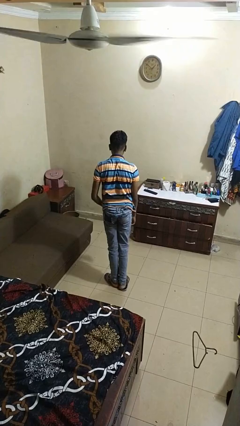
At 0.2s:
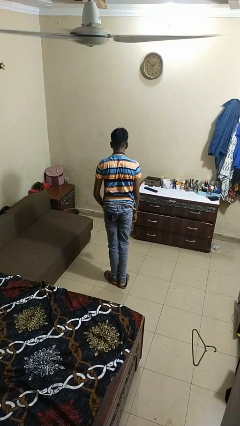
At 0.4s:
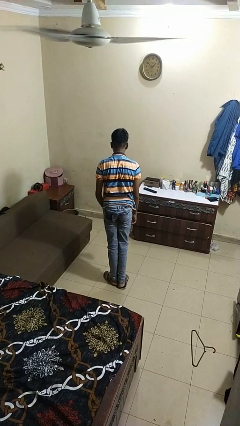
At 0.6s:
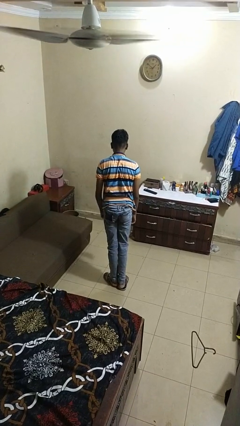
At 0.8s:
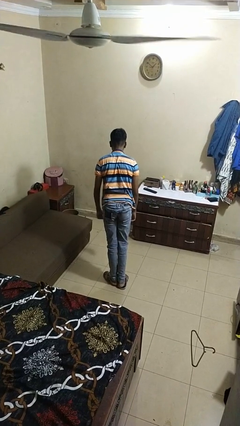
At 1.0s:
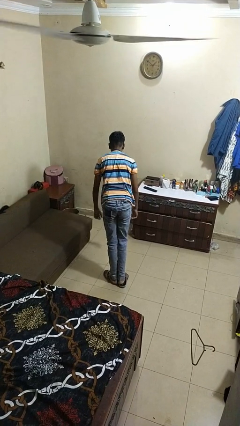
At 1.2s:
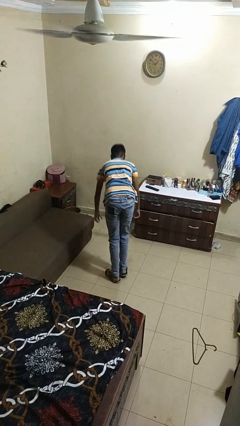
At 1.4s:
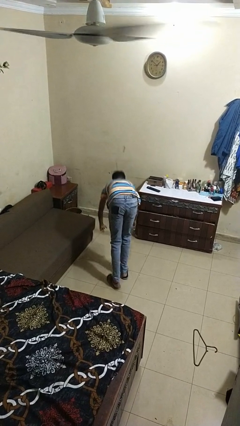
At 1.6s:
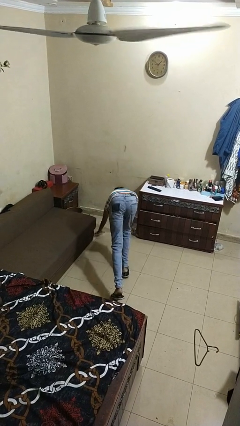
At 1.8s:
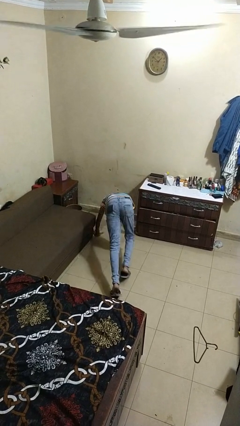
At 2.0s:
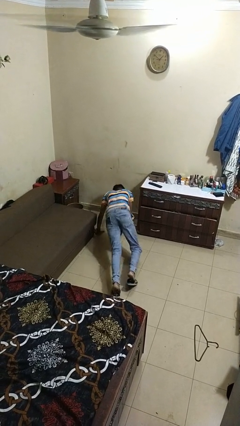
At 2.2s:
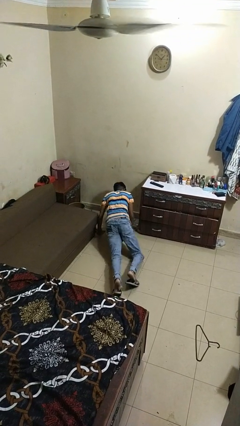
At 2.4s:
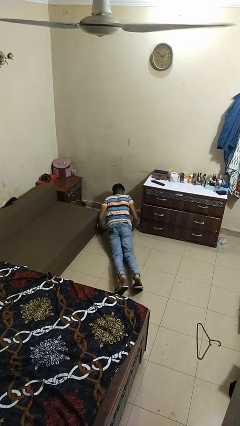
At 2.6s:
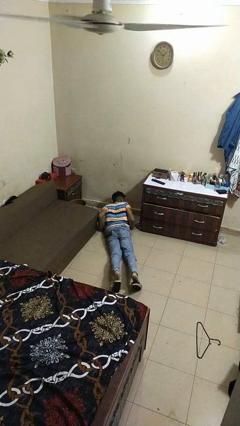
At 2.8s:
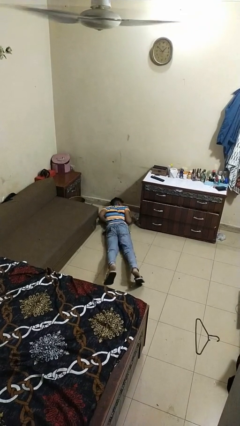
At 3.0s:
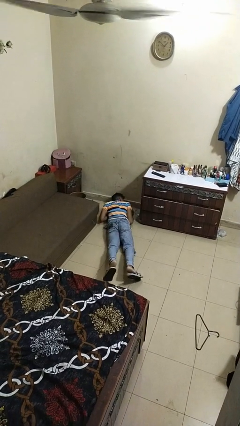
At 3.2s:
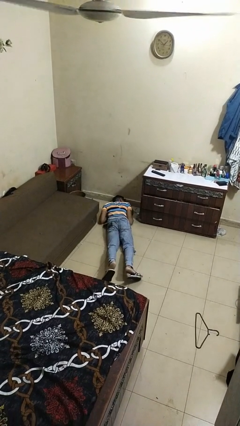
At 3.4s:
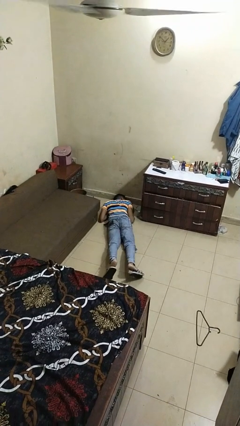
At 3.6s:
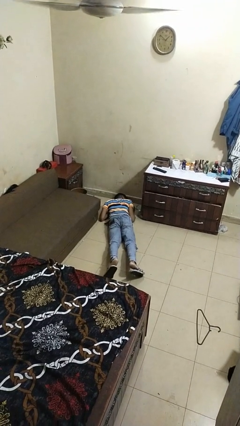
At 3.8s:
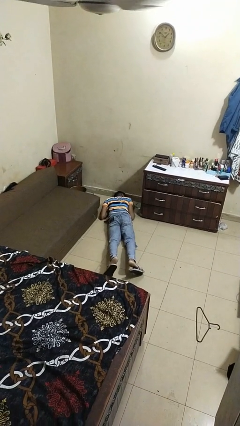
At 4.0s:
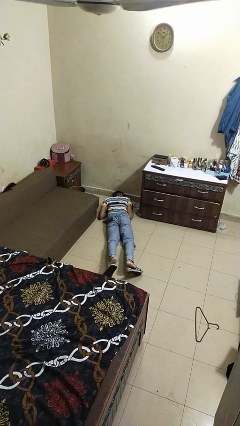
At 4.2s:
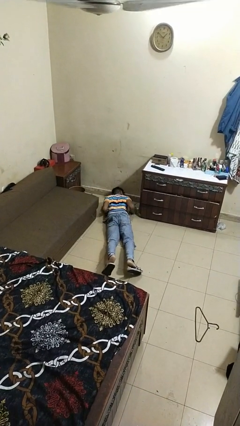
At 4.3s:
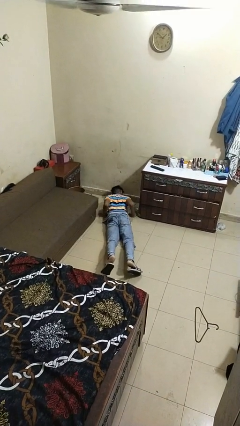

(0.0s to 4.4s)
person trips on object on floor

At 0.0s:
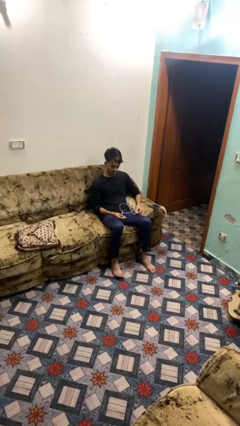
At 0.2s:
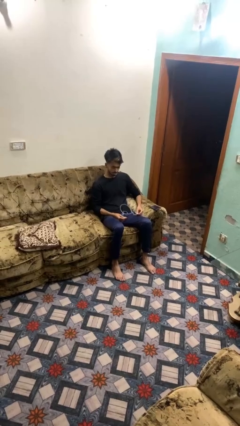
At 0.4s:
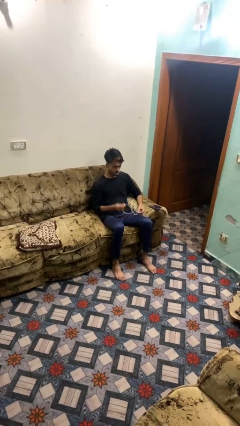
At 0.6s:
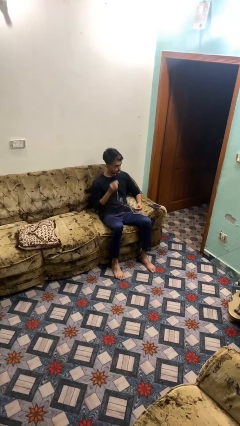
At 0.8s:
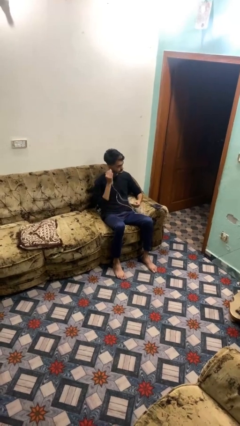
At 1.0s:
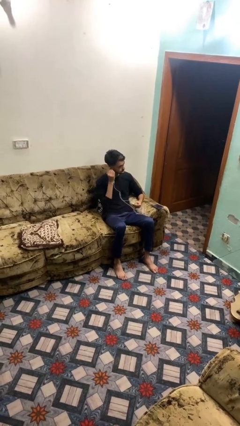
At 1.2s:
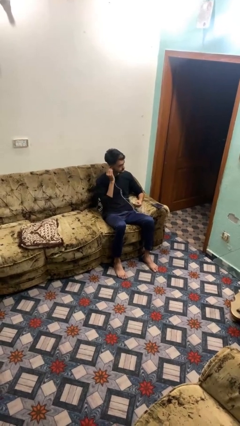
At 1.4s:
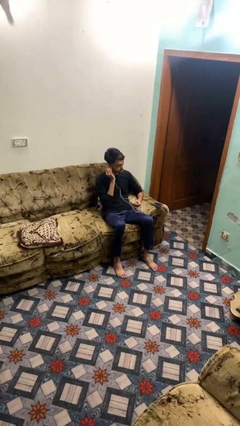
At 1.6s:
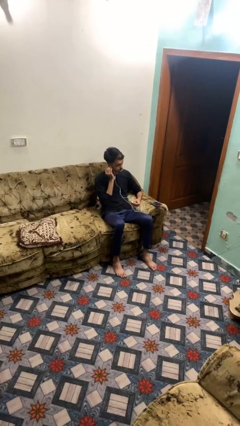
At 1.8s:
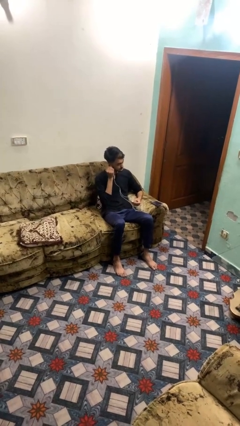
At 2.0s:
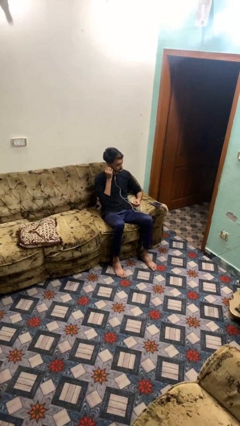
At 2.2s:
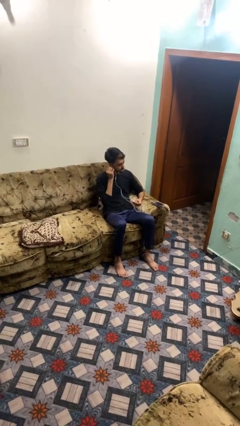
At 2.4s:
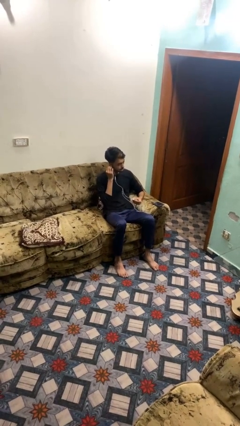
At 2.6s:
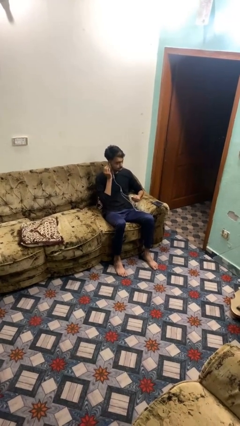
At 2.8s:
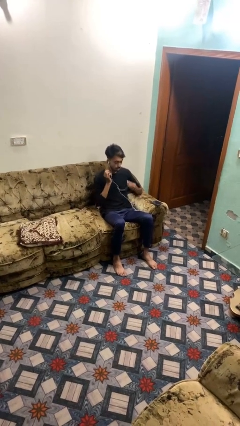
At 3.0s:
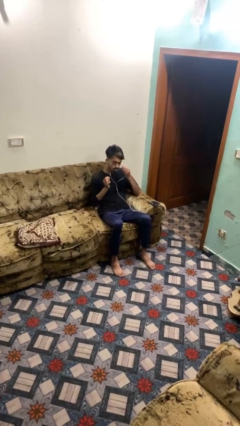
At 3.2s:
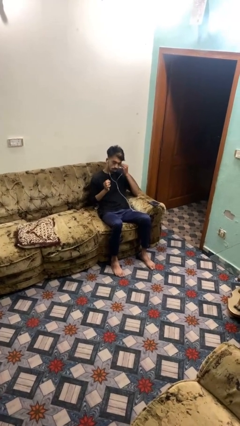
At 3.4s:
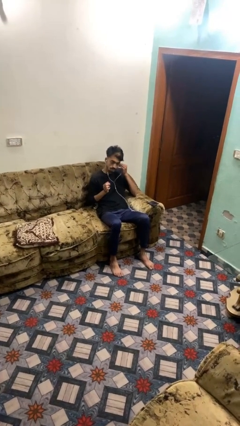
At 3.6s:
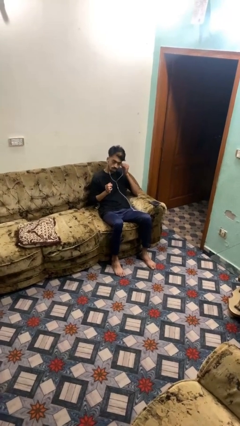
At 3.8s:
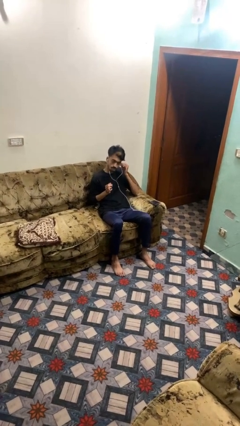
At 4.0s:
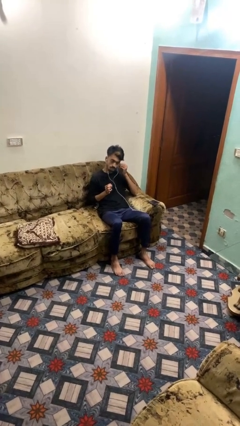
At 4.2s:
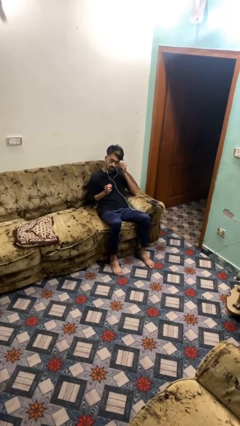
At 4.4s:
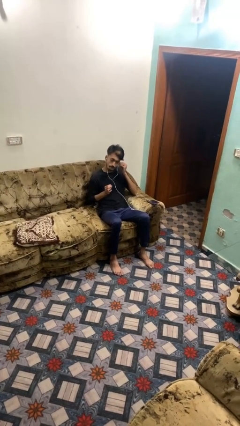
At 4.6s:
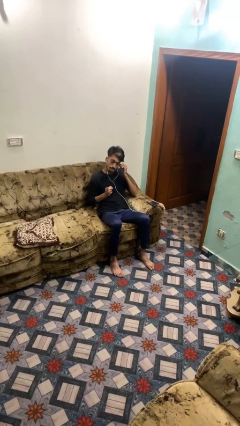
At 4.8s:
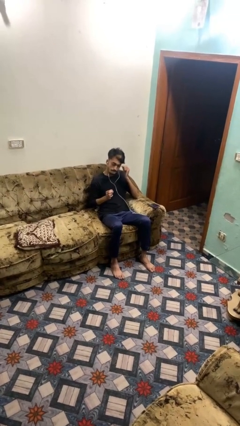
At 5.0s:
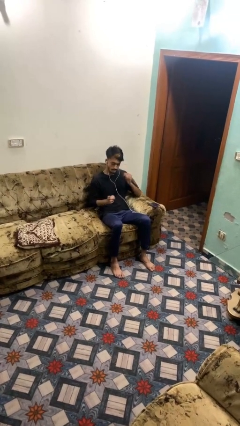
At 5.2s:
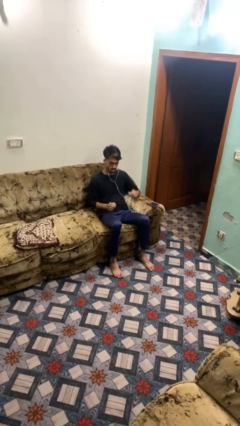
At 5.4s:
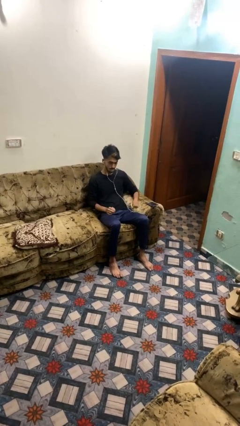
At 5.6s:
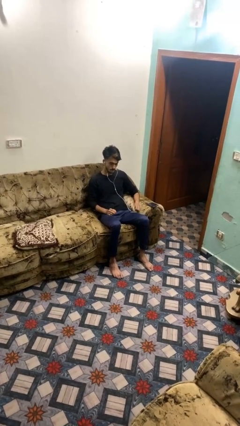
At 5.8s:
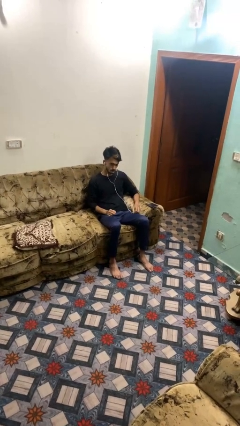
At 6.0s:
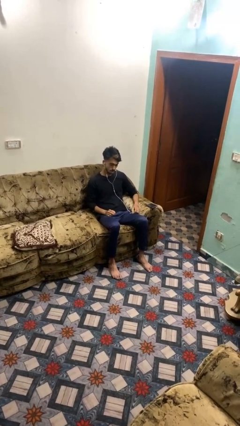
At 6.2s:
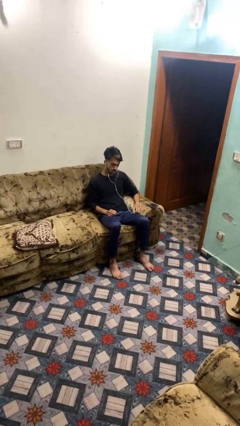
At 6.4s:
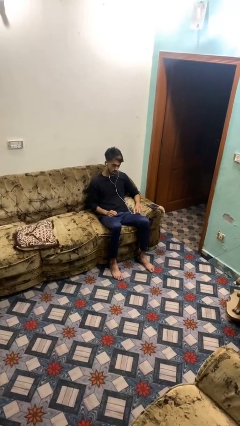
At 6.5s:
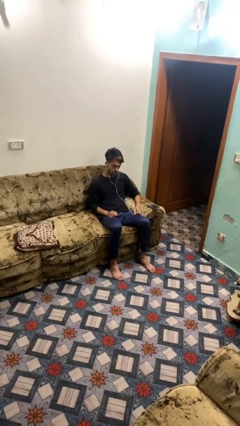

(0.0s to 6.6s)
person puts on headphones

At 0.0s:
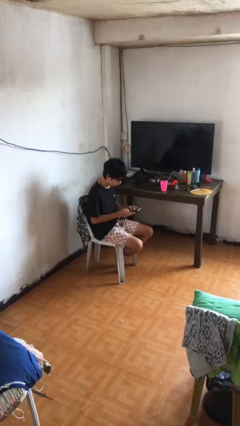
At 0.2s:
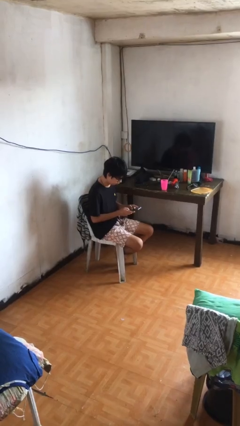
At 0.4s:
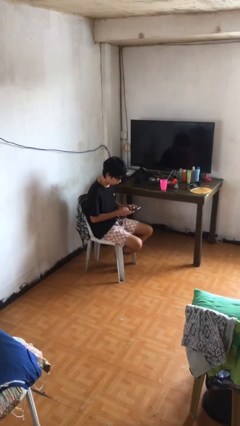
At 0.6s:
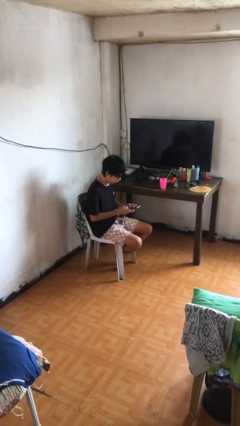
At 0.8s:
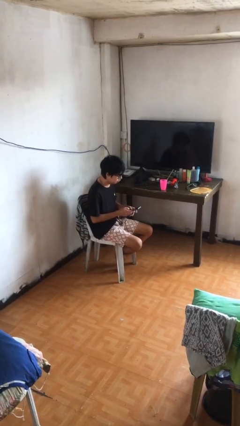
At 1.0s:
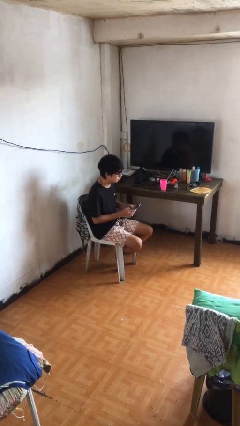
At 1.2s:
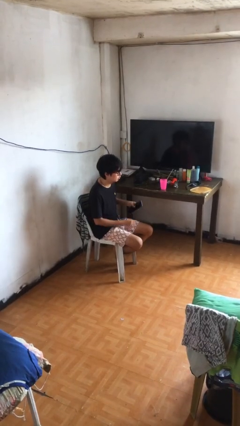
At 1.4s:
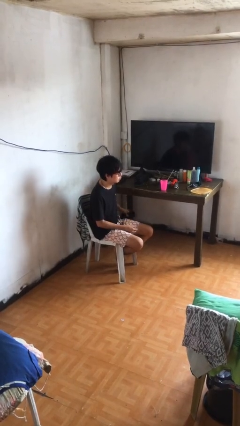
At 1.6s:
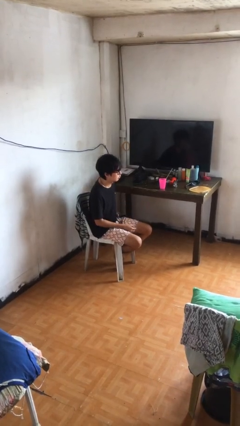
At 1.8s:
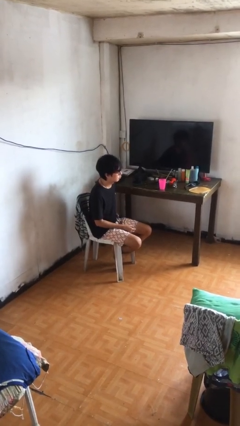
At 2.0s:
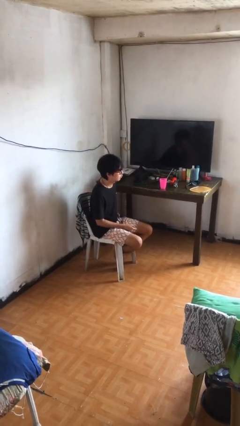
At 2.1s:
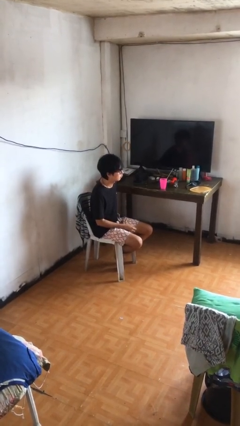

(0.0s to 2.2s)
person puts phone into pocket

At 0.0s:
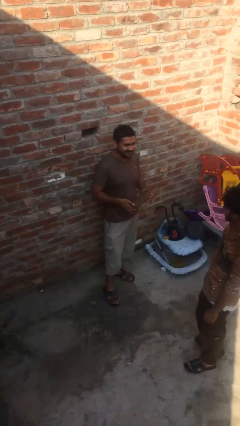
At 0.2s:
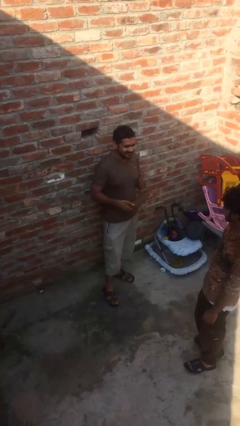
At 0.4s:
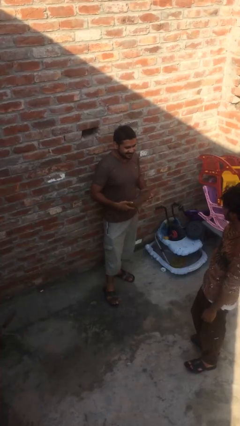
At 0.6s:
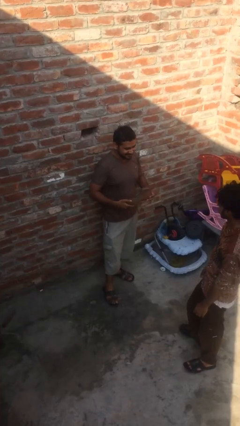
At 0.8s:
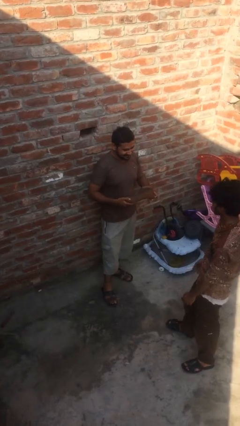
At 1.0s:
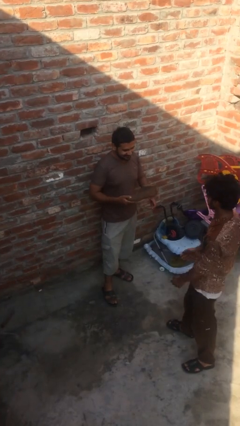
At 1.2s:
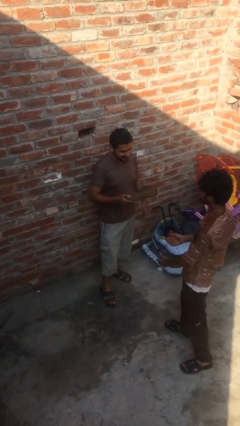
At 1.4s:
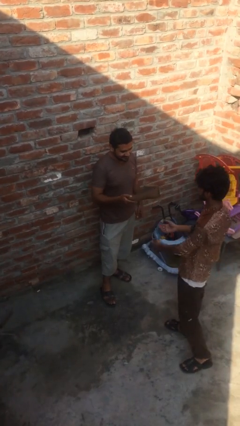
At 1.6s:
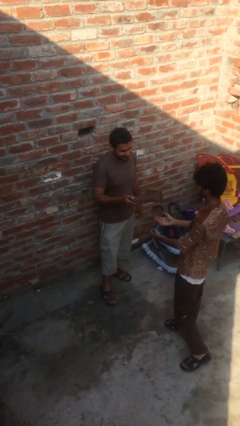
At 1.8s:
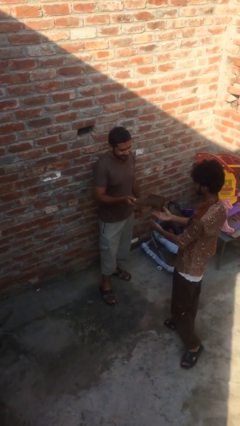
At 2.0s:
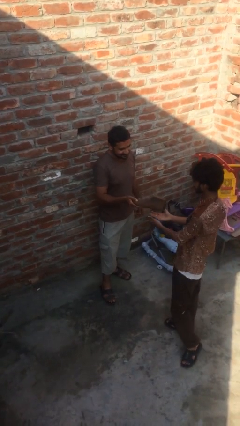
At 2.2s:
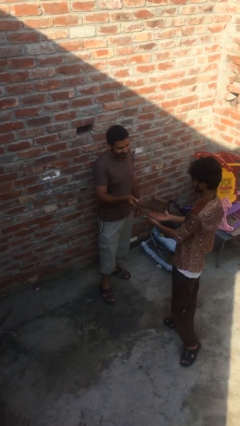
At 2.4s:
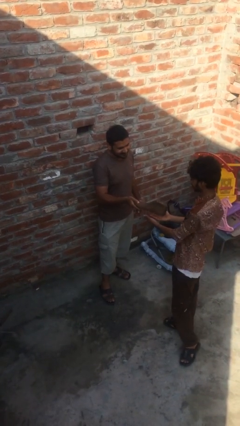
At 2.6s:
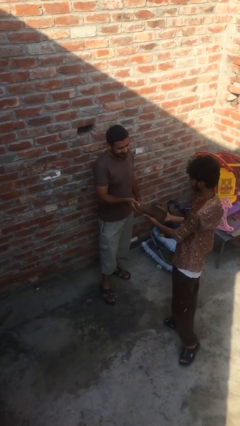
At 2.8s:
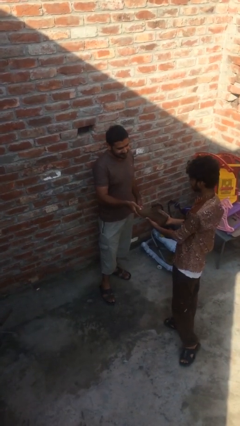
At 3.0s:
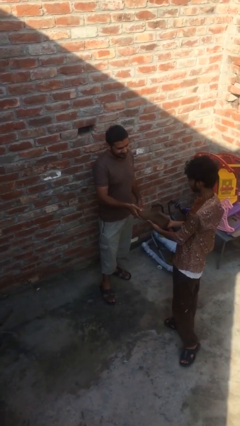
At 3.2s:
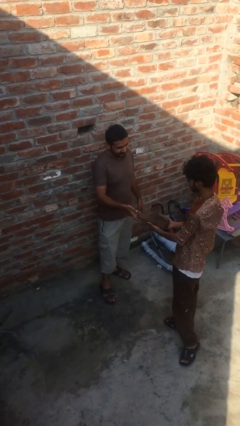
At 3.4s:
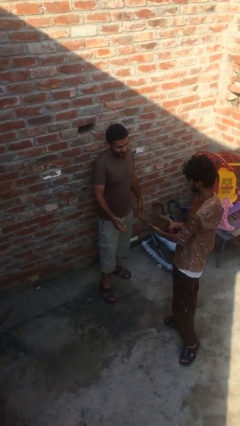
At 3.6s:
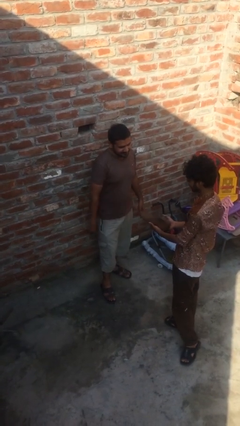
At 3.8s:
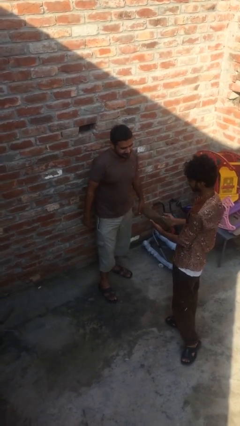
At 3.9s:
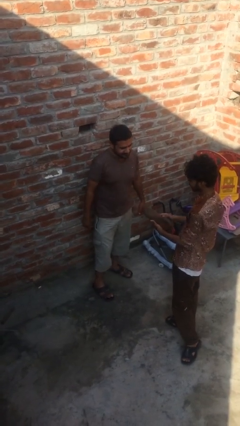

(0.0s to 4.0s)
person transfers object to person

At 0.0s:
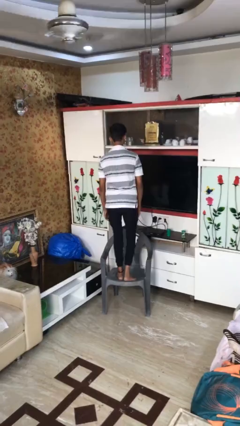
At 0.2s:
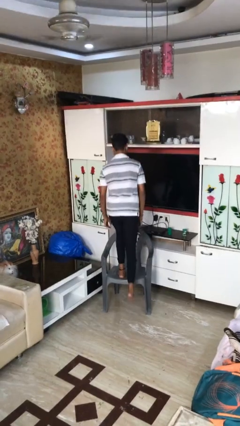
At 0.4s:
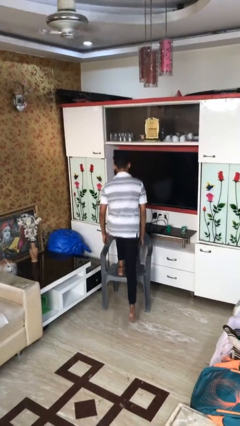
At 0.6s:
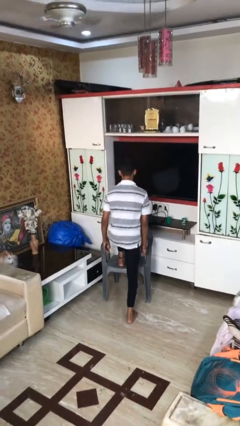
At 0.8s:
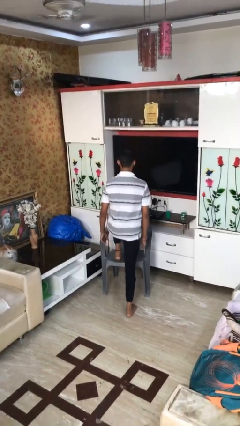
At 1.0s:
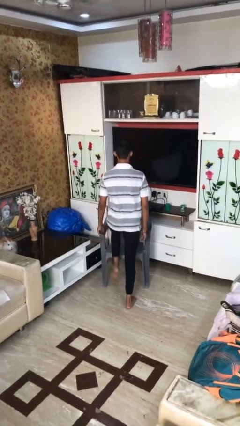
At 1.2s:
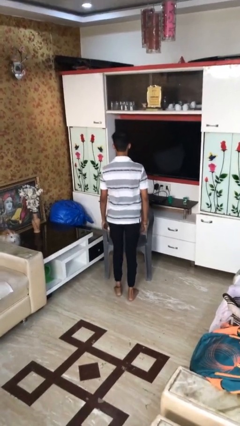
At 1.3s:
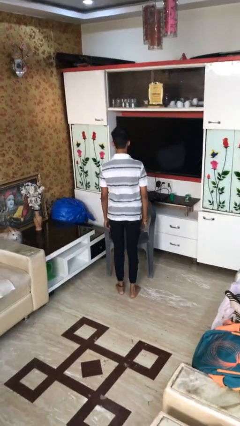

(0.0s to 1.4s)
person climbs off chair
